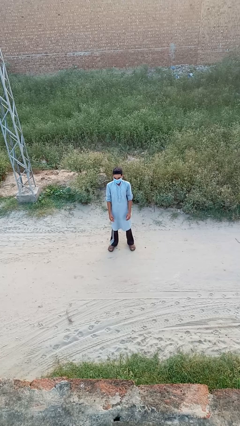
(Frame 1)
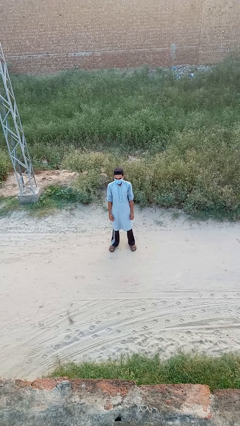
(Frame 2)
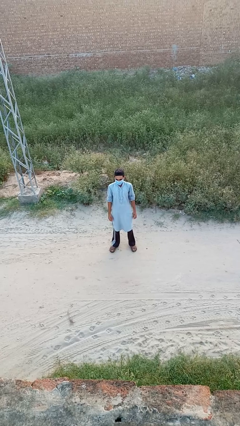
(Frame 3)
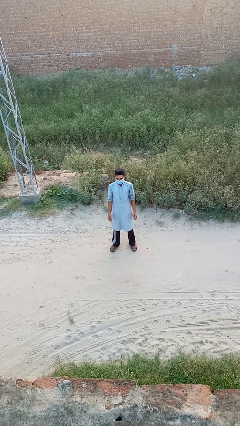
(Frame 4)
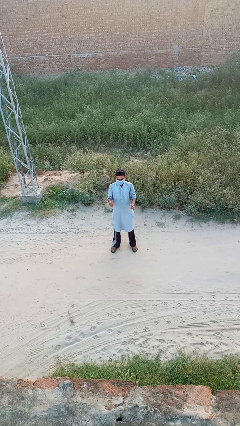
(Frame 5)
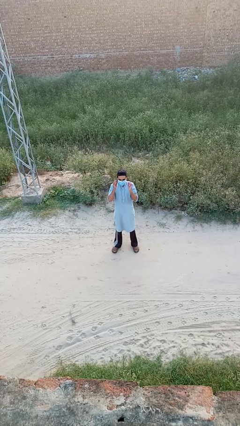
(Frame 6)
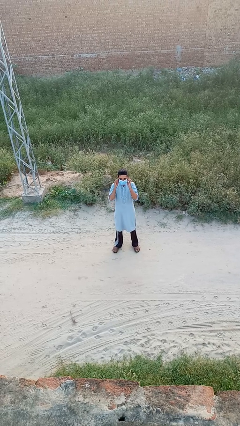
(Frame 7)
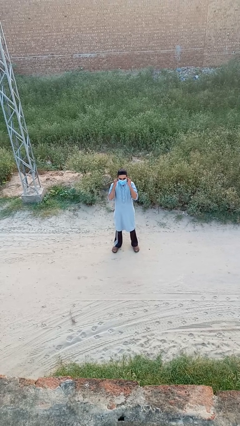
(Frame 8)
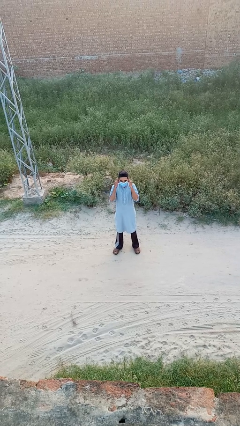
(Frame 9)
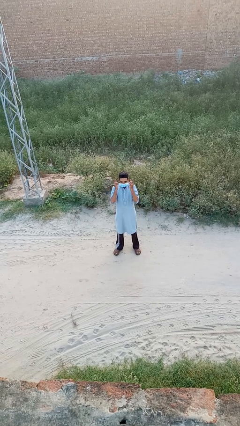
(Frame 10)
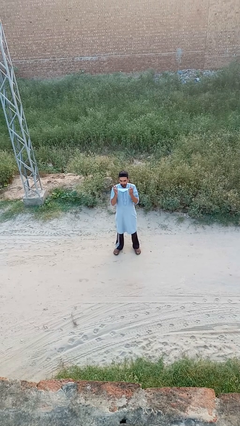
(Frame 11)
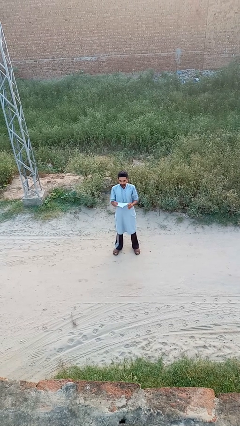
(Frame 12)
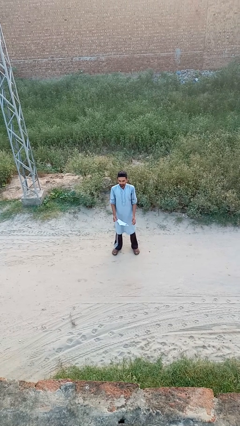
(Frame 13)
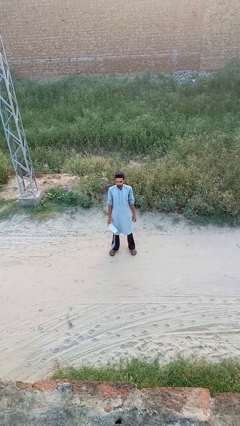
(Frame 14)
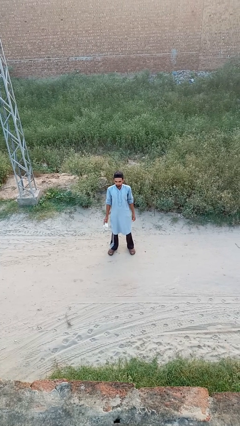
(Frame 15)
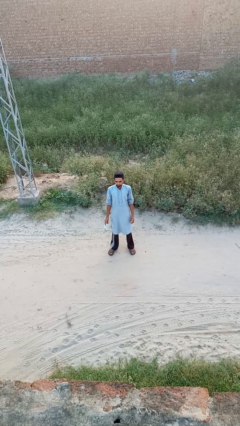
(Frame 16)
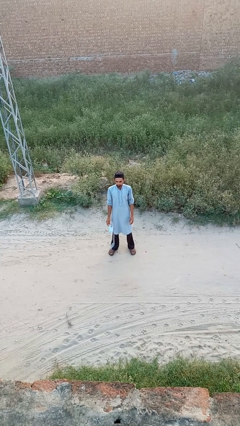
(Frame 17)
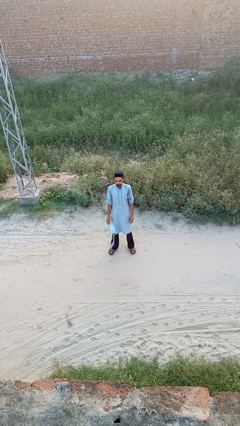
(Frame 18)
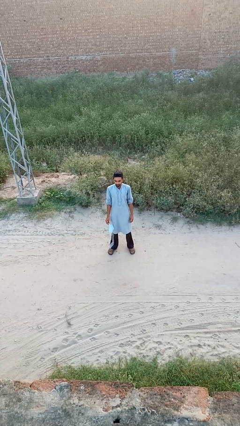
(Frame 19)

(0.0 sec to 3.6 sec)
person takes off facemask

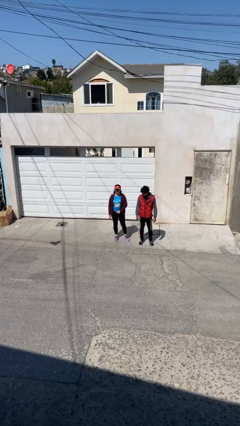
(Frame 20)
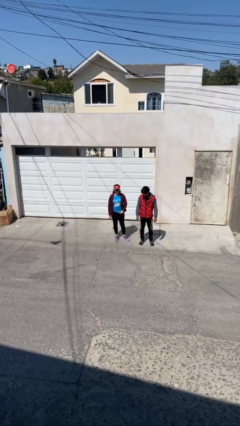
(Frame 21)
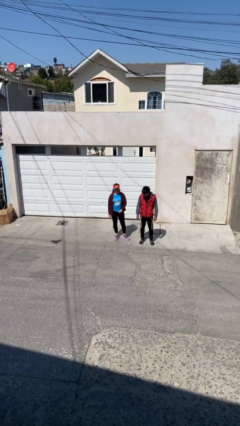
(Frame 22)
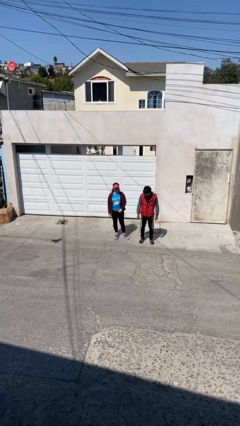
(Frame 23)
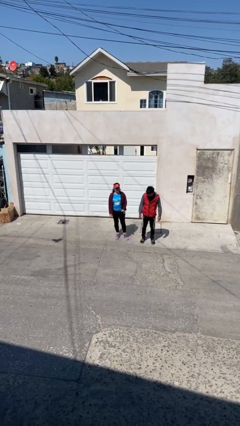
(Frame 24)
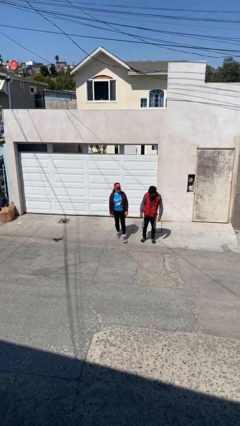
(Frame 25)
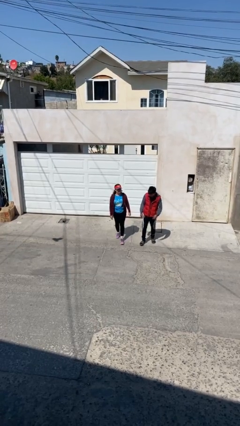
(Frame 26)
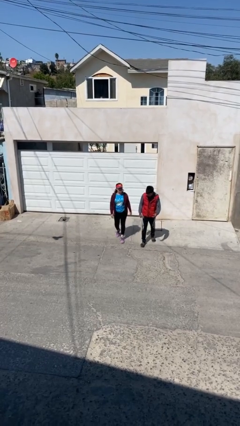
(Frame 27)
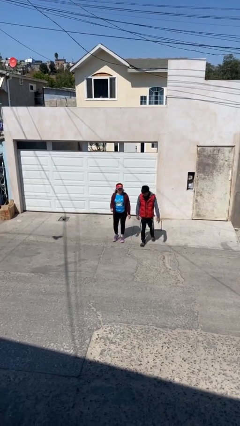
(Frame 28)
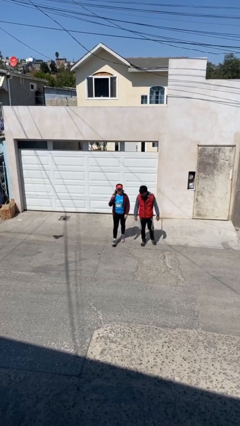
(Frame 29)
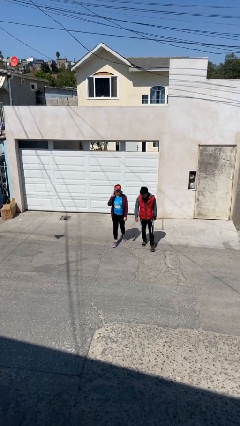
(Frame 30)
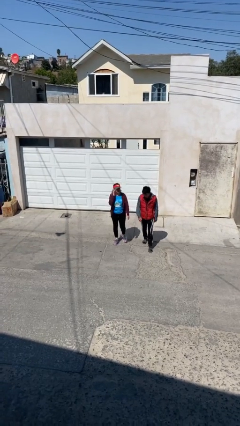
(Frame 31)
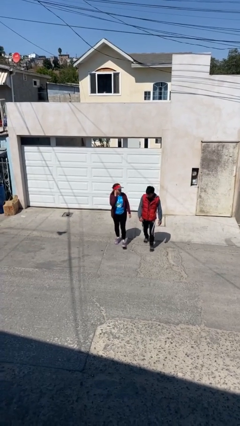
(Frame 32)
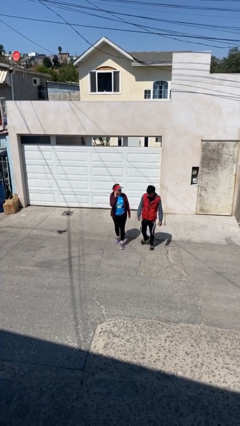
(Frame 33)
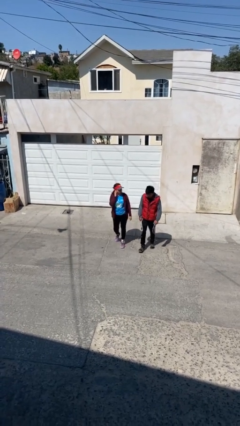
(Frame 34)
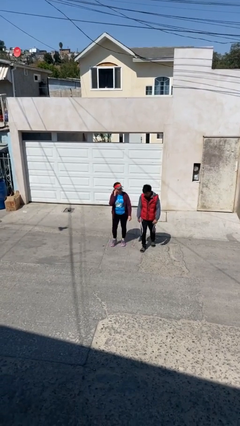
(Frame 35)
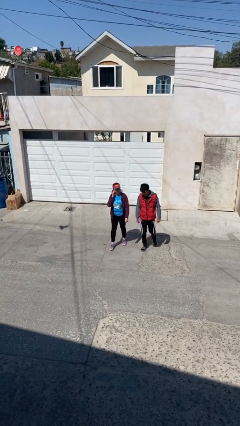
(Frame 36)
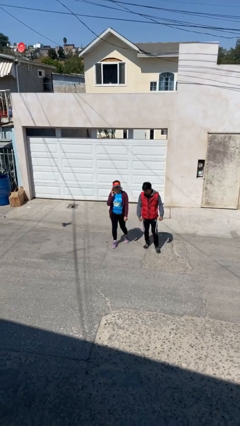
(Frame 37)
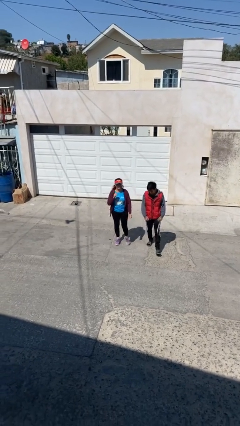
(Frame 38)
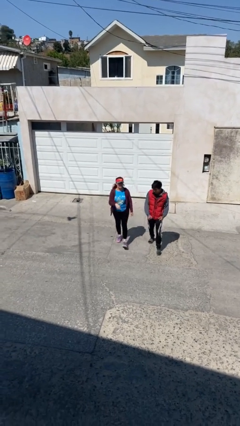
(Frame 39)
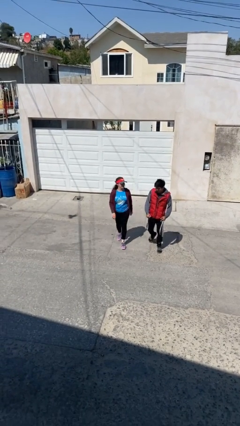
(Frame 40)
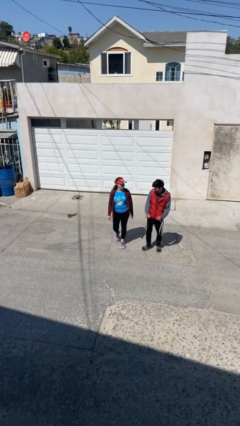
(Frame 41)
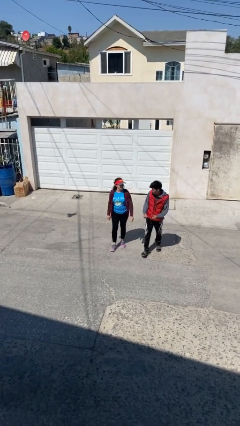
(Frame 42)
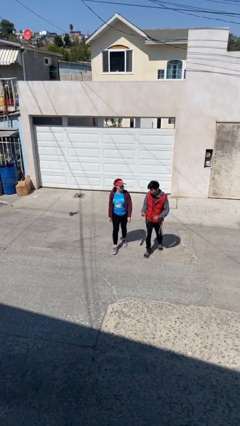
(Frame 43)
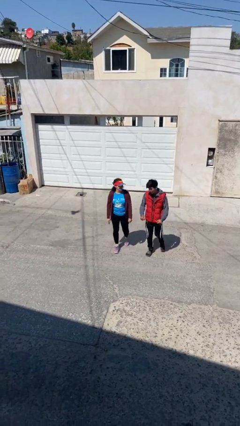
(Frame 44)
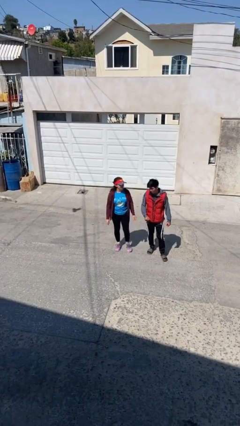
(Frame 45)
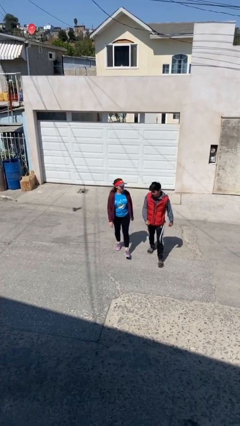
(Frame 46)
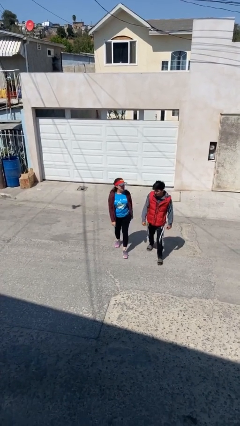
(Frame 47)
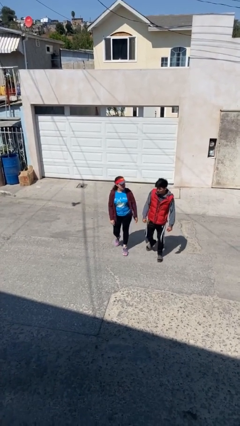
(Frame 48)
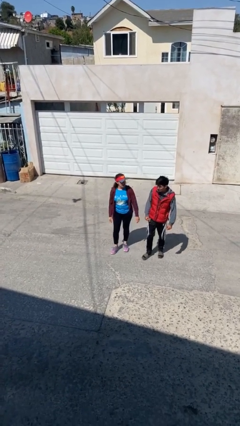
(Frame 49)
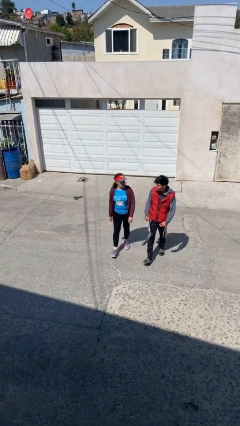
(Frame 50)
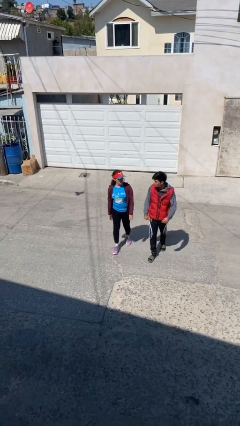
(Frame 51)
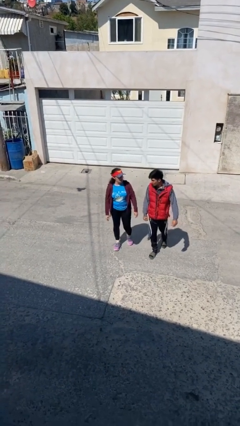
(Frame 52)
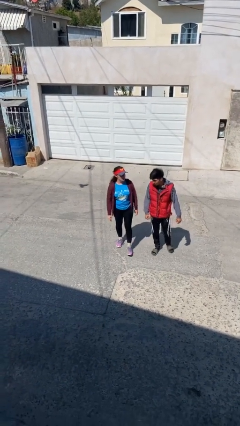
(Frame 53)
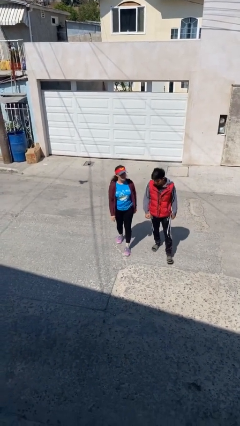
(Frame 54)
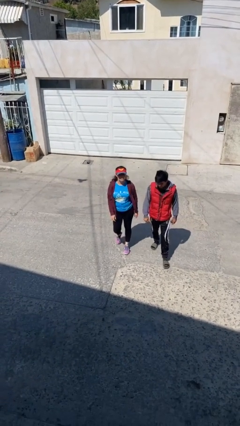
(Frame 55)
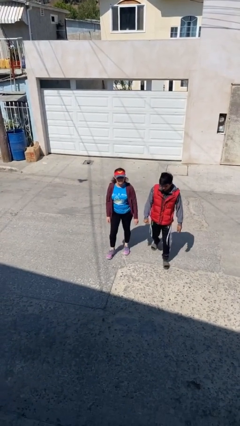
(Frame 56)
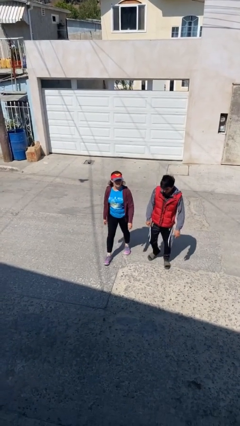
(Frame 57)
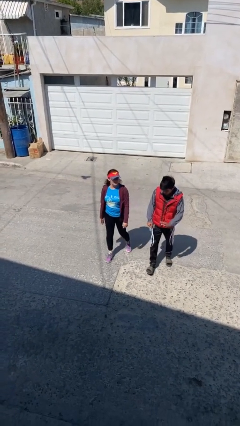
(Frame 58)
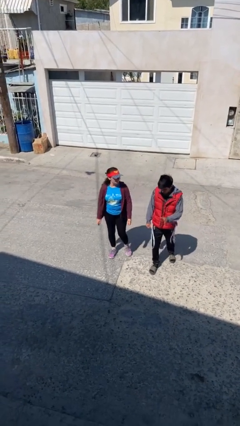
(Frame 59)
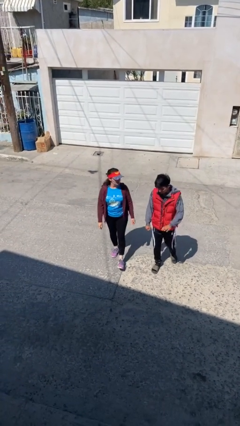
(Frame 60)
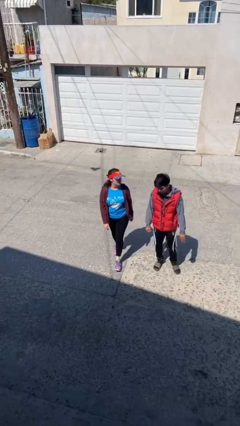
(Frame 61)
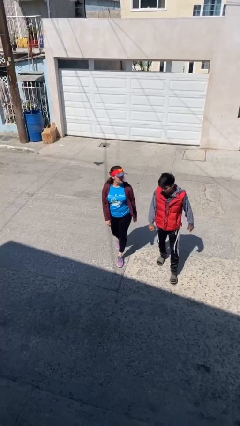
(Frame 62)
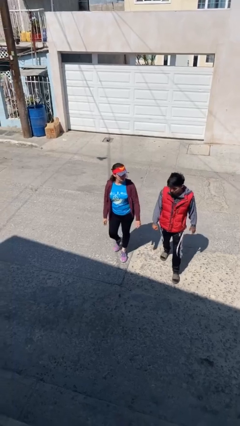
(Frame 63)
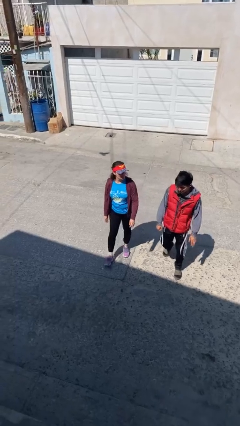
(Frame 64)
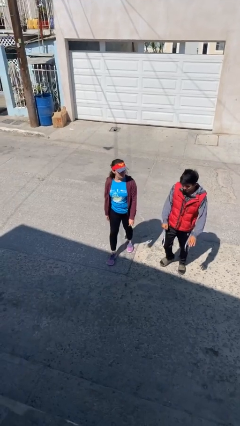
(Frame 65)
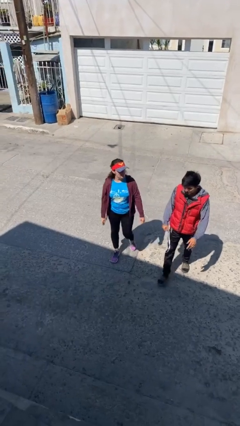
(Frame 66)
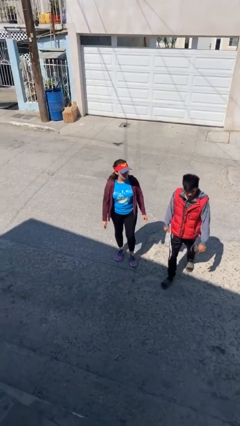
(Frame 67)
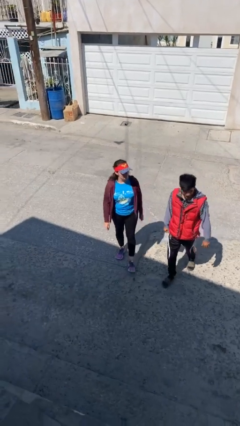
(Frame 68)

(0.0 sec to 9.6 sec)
person talks to person

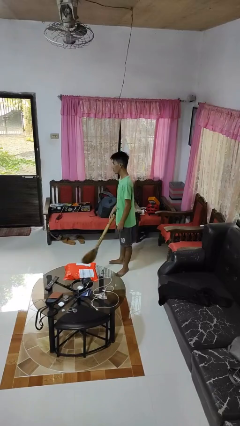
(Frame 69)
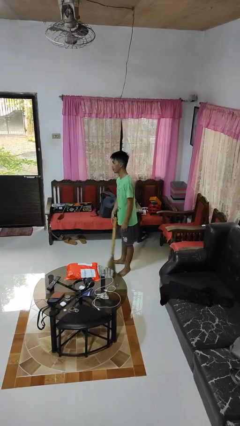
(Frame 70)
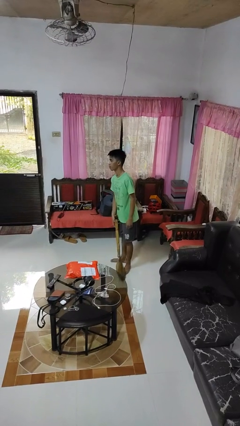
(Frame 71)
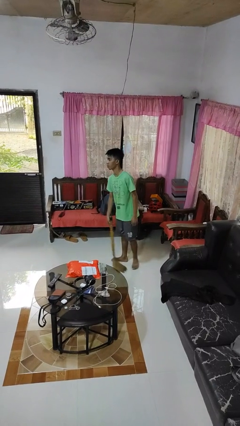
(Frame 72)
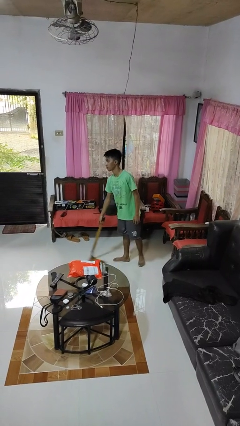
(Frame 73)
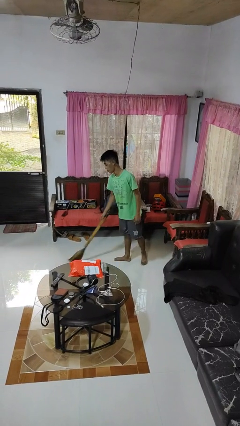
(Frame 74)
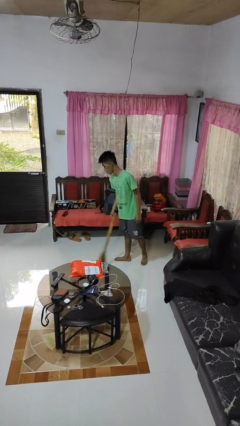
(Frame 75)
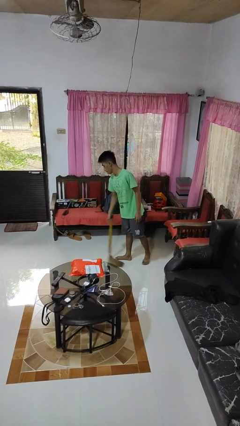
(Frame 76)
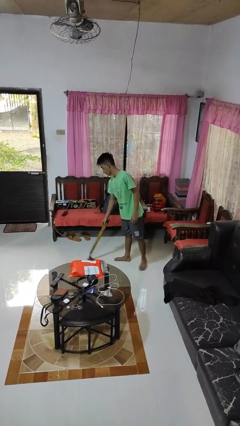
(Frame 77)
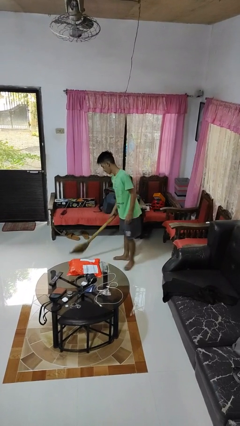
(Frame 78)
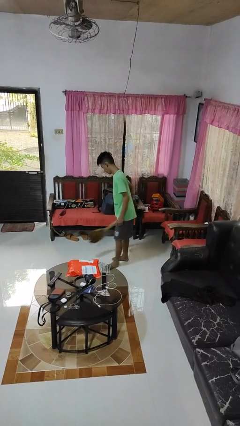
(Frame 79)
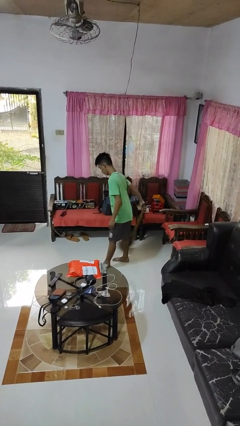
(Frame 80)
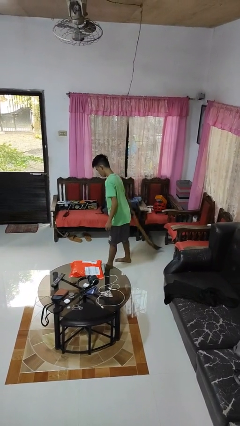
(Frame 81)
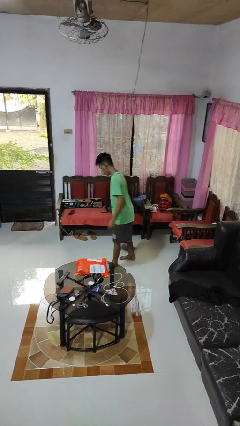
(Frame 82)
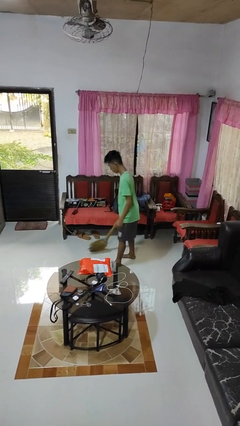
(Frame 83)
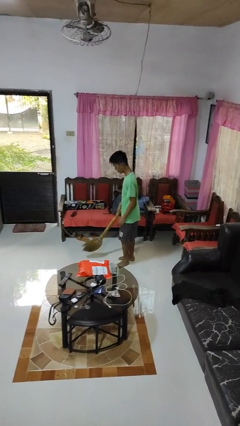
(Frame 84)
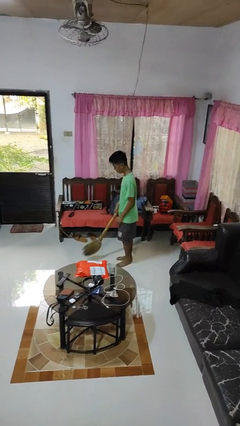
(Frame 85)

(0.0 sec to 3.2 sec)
person sweeps floor

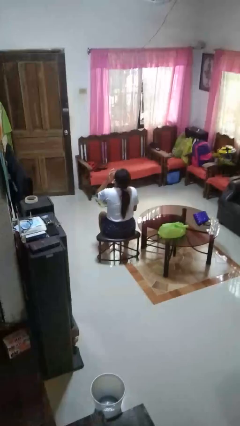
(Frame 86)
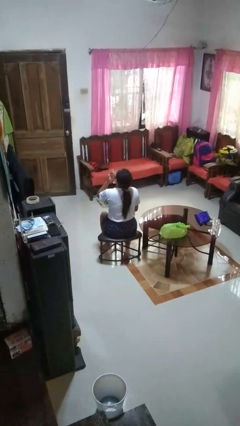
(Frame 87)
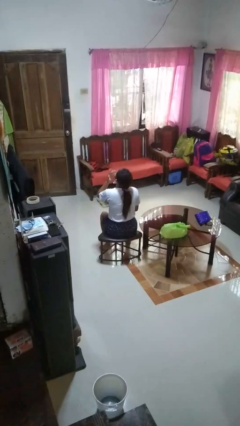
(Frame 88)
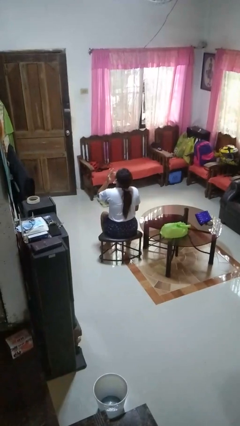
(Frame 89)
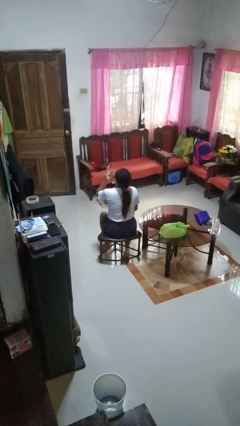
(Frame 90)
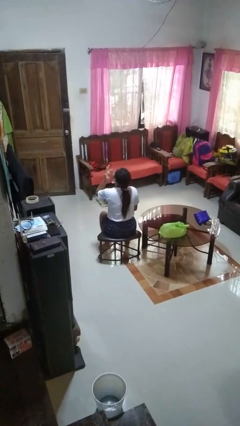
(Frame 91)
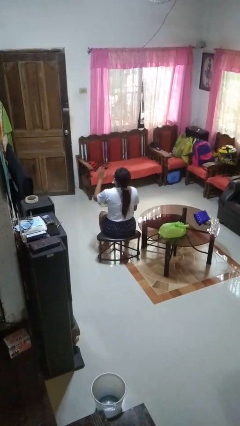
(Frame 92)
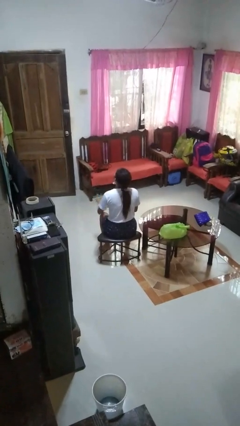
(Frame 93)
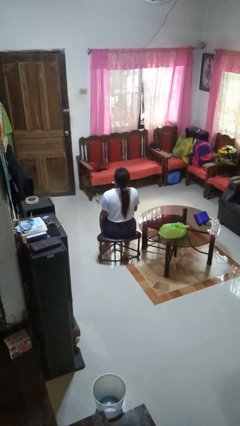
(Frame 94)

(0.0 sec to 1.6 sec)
person licks fingers
